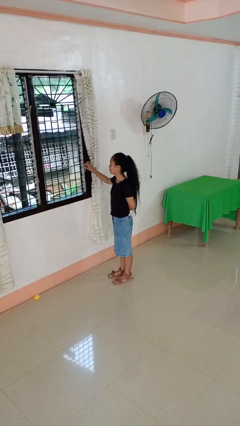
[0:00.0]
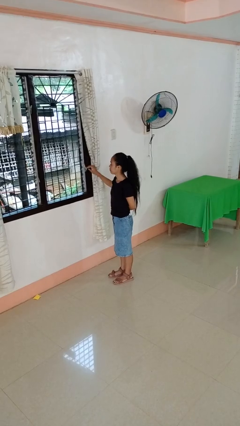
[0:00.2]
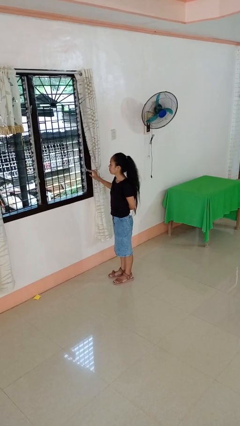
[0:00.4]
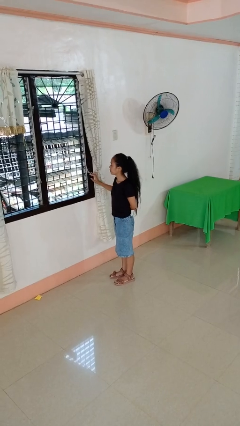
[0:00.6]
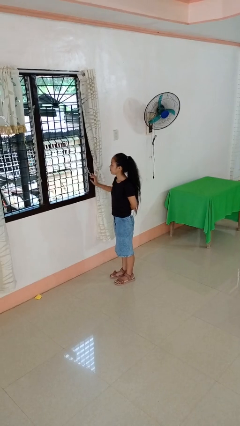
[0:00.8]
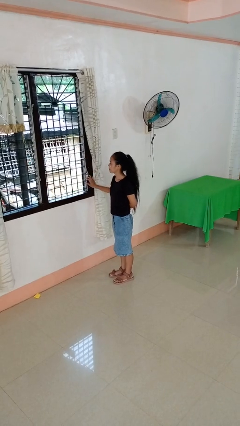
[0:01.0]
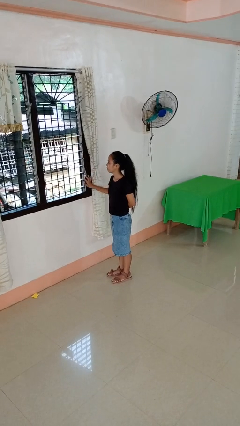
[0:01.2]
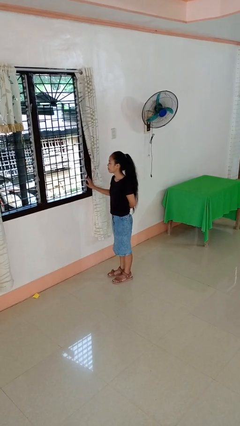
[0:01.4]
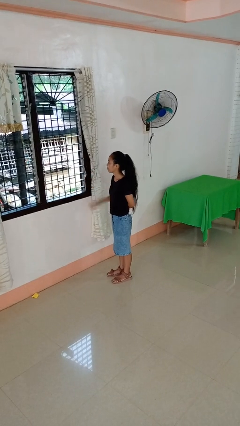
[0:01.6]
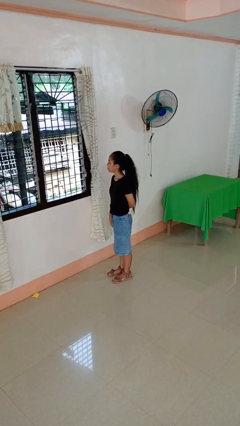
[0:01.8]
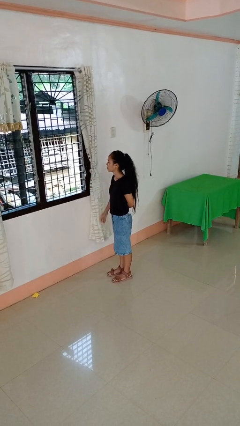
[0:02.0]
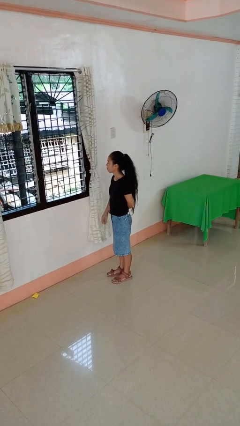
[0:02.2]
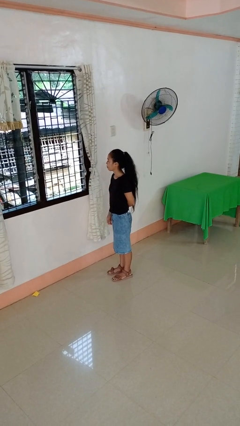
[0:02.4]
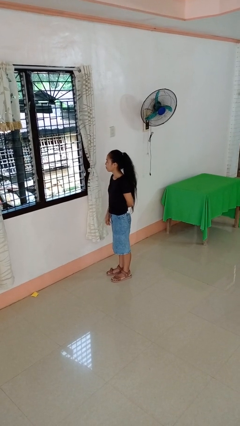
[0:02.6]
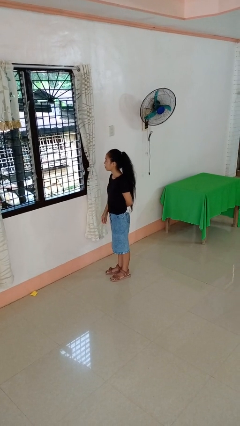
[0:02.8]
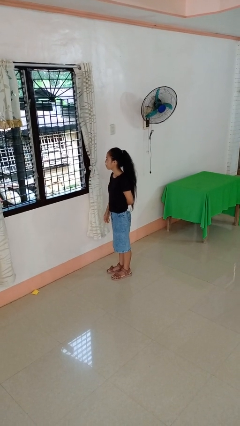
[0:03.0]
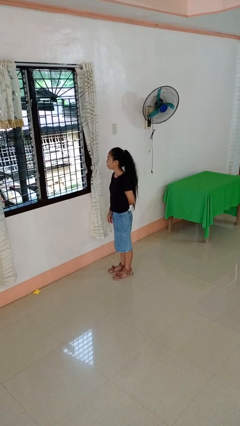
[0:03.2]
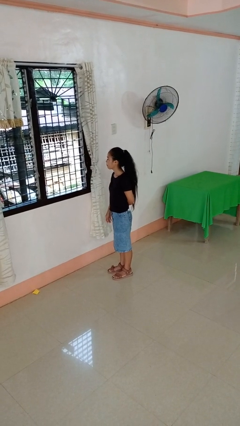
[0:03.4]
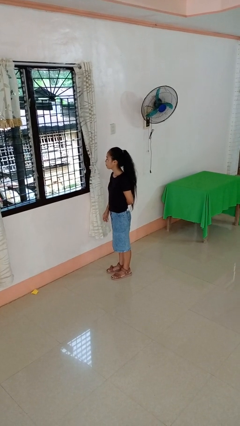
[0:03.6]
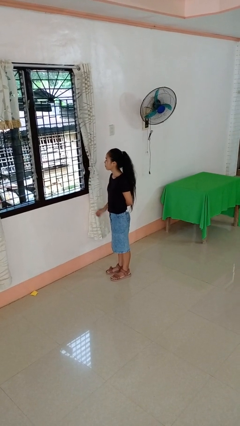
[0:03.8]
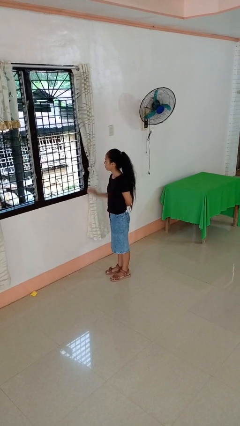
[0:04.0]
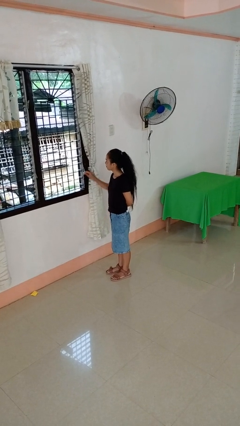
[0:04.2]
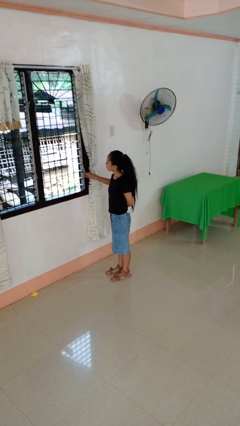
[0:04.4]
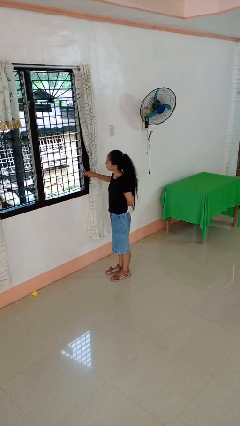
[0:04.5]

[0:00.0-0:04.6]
person opens home window

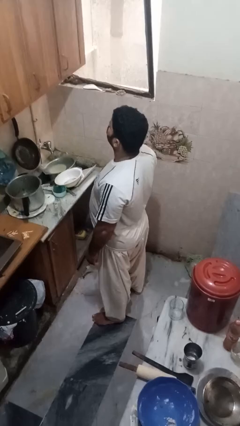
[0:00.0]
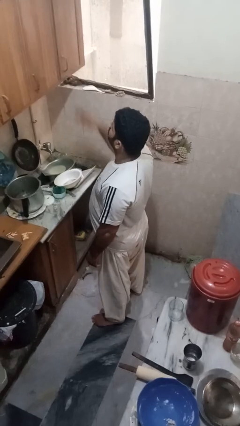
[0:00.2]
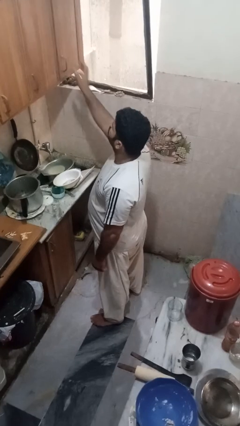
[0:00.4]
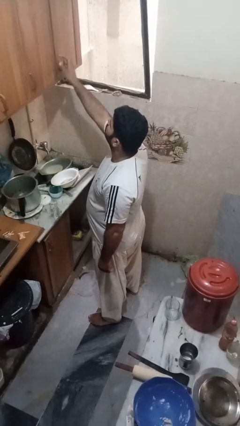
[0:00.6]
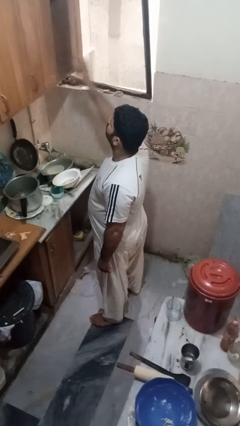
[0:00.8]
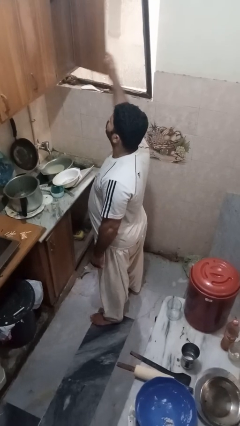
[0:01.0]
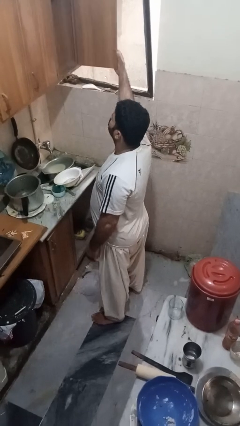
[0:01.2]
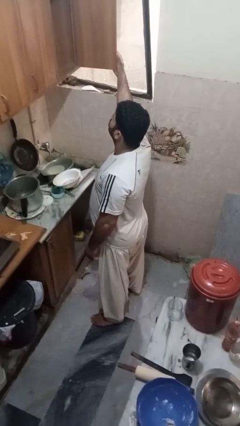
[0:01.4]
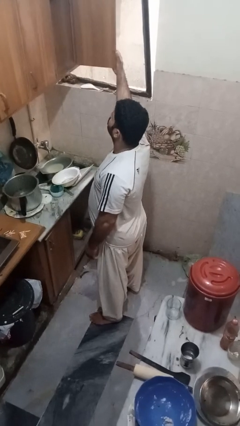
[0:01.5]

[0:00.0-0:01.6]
person opens cabinet

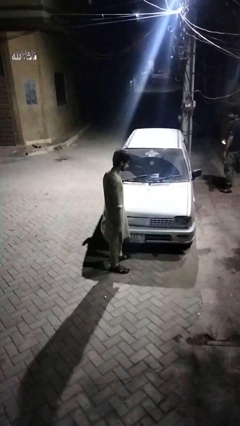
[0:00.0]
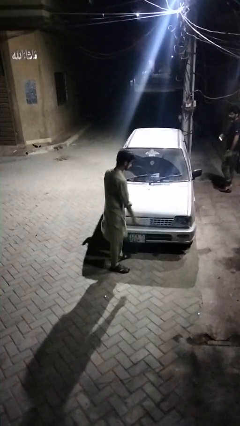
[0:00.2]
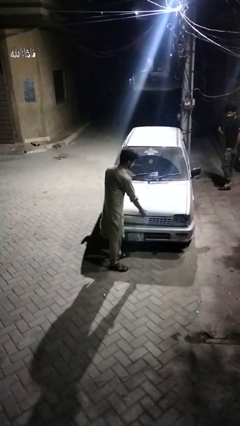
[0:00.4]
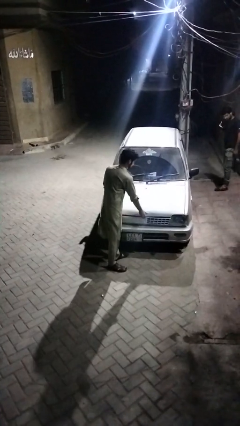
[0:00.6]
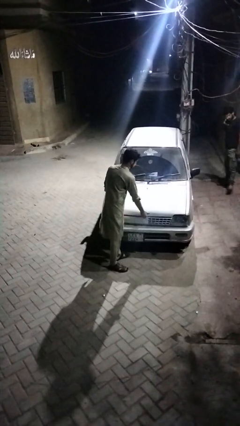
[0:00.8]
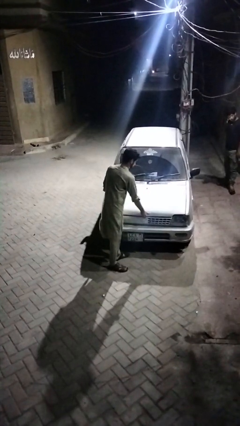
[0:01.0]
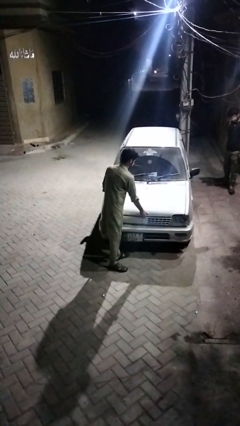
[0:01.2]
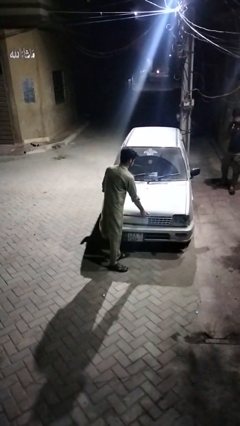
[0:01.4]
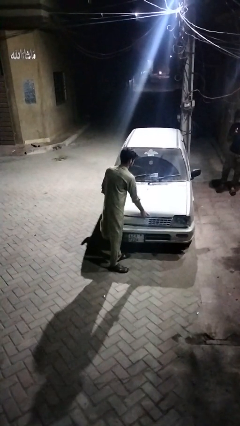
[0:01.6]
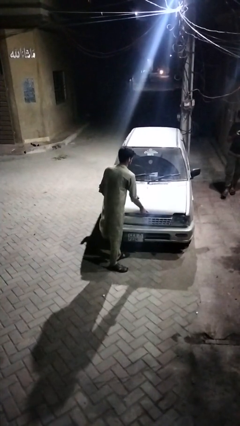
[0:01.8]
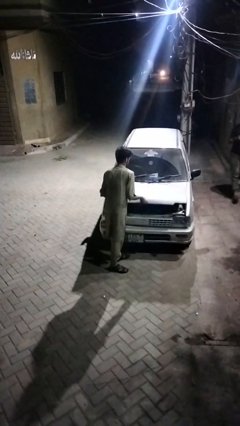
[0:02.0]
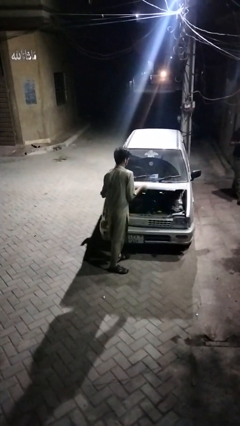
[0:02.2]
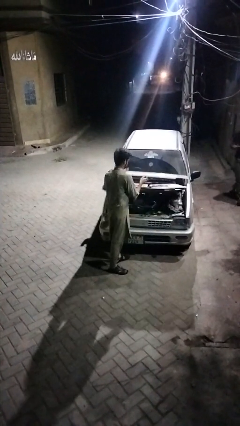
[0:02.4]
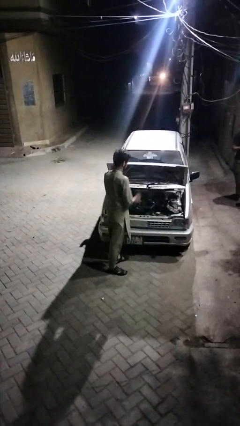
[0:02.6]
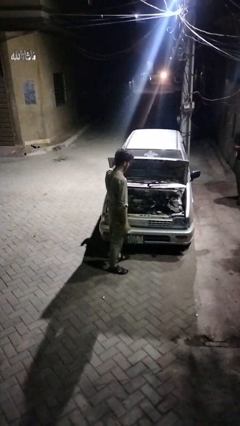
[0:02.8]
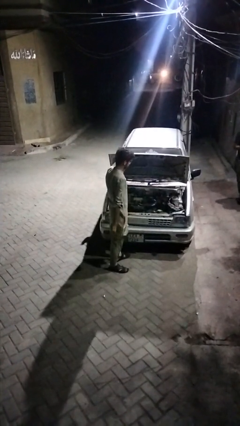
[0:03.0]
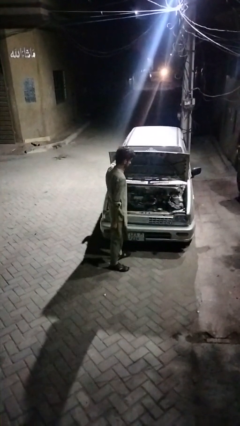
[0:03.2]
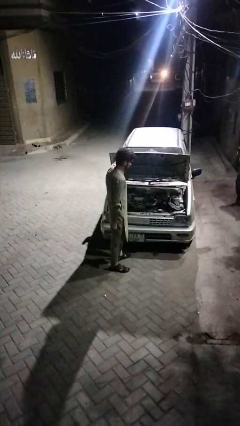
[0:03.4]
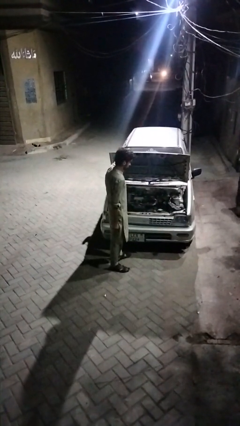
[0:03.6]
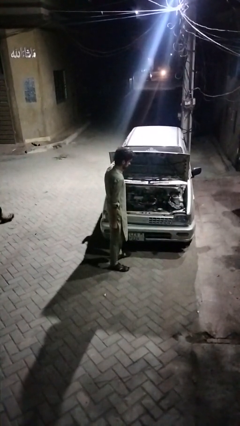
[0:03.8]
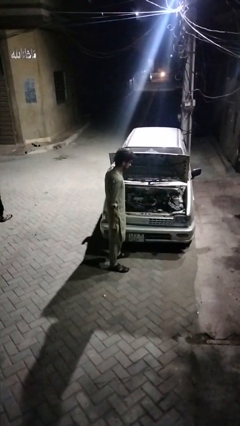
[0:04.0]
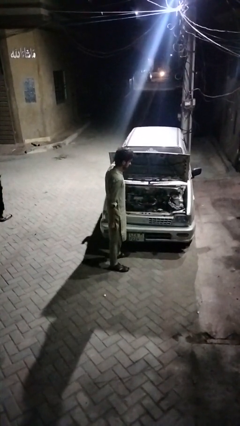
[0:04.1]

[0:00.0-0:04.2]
person opens car hood

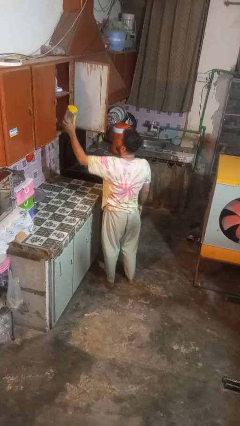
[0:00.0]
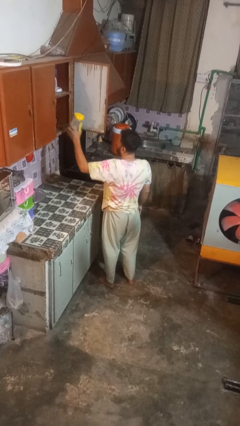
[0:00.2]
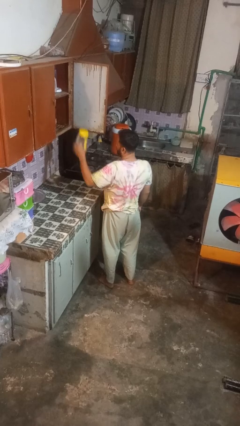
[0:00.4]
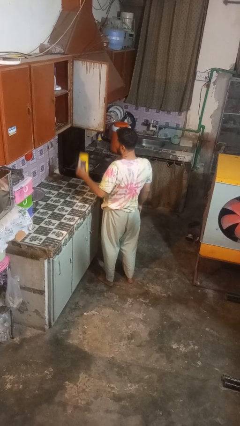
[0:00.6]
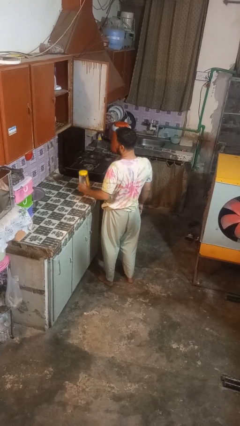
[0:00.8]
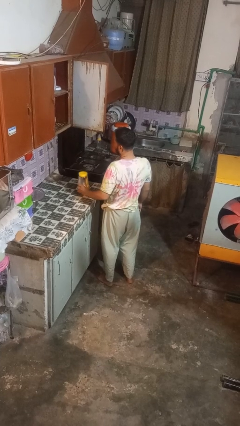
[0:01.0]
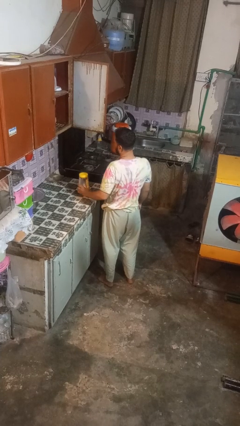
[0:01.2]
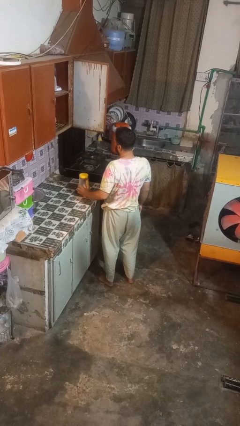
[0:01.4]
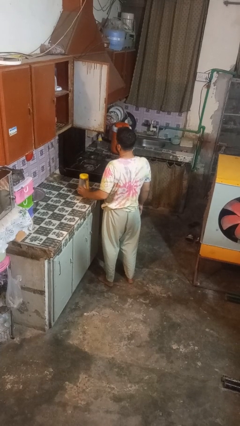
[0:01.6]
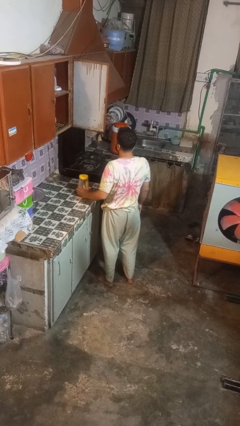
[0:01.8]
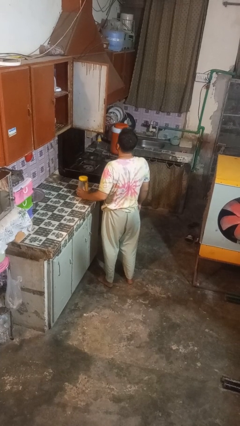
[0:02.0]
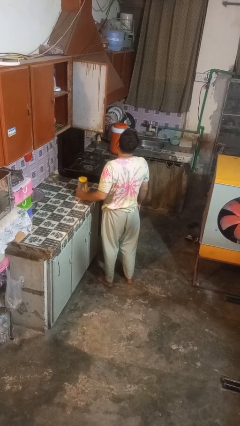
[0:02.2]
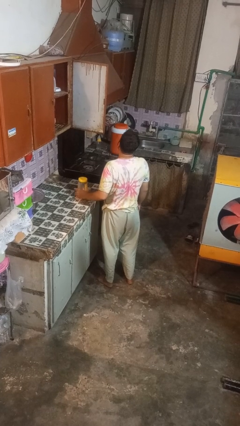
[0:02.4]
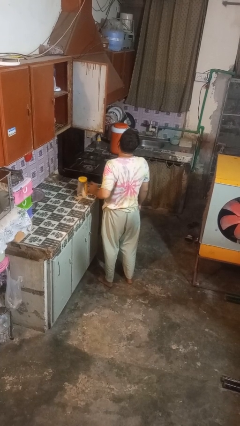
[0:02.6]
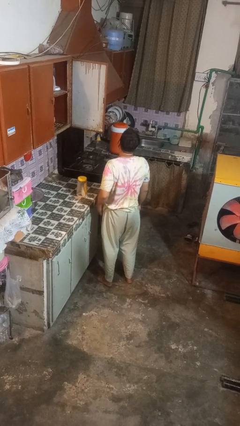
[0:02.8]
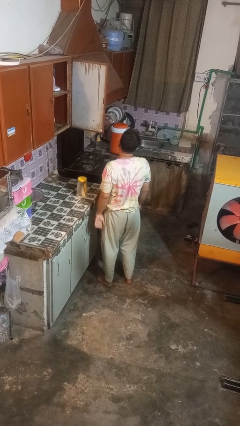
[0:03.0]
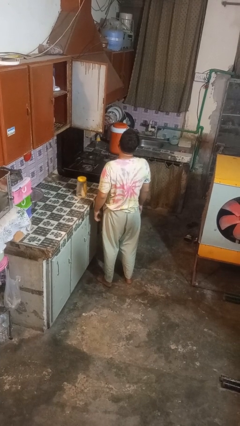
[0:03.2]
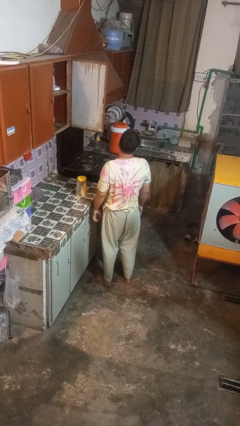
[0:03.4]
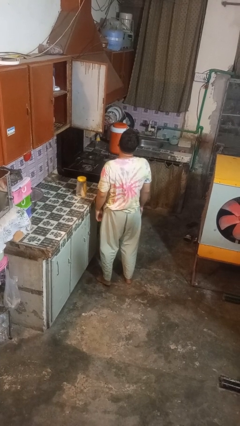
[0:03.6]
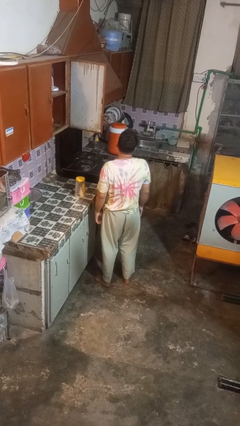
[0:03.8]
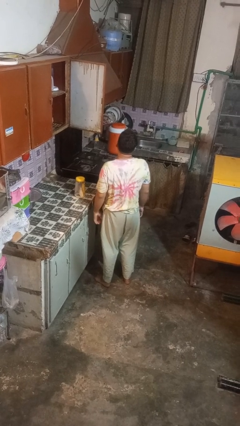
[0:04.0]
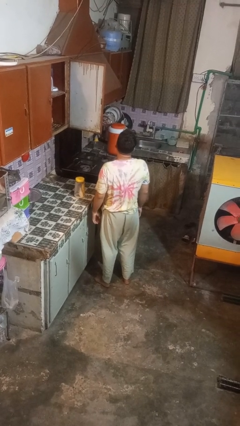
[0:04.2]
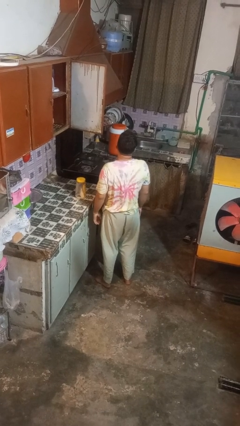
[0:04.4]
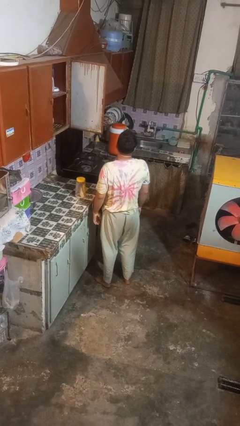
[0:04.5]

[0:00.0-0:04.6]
person takes object from cabinet

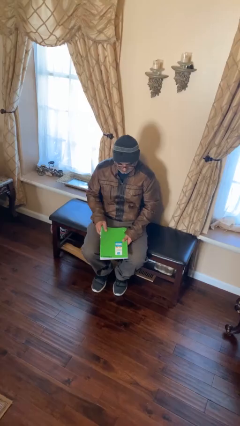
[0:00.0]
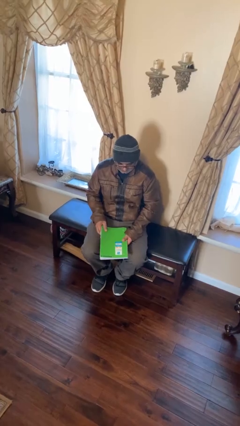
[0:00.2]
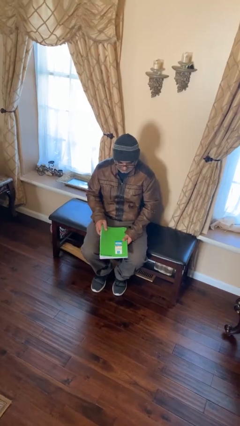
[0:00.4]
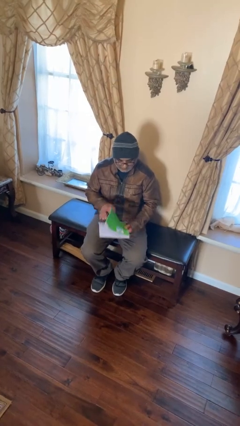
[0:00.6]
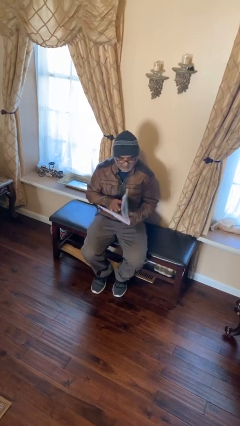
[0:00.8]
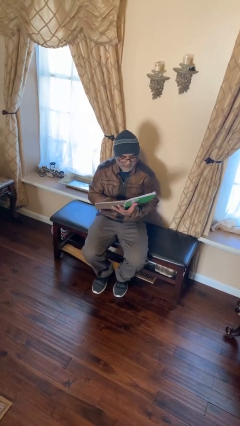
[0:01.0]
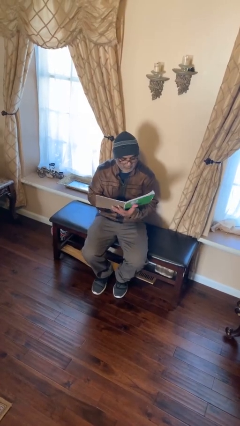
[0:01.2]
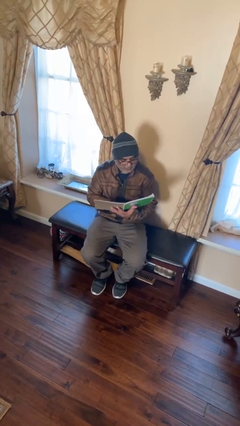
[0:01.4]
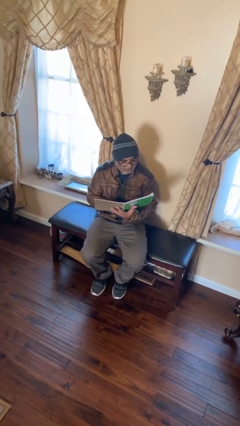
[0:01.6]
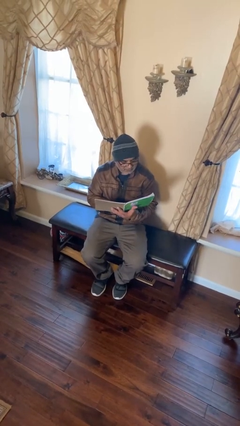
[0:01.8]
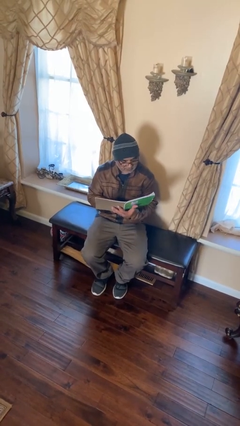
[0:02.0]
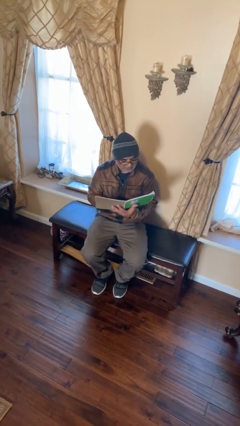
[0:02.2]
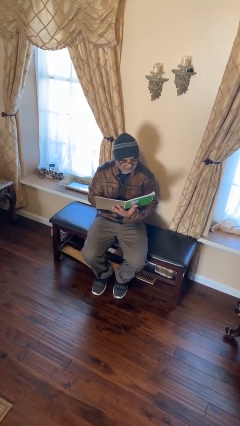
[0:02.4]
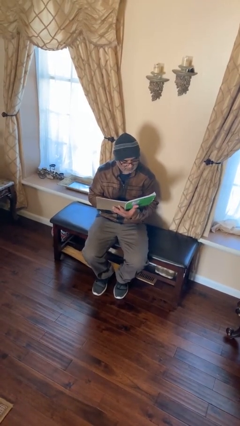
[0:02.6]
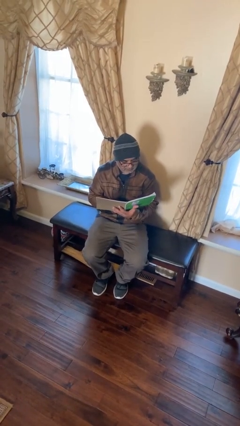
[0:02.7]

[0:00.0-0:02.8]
person reads document
